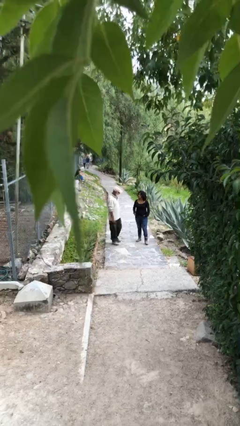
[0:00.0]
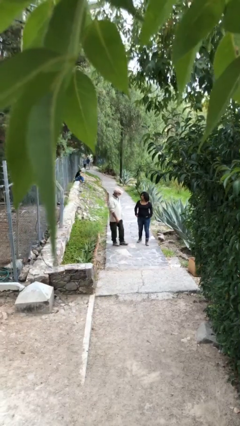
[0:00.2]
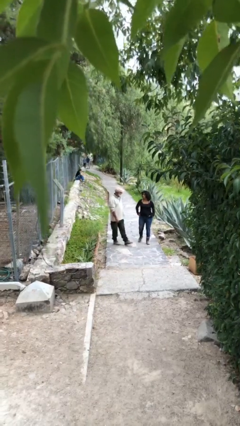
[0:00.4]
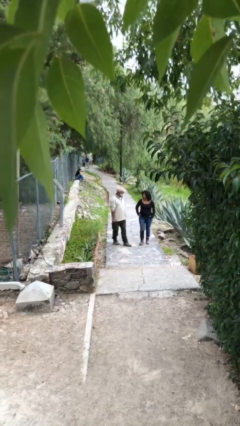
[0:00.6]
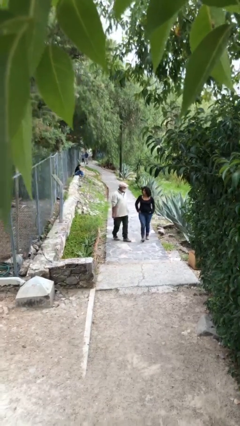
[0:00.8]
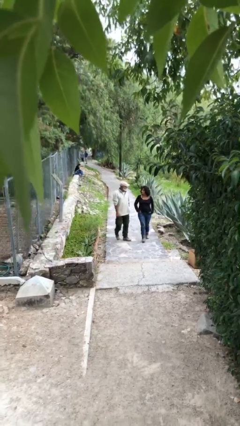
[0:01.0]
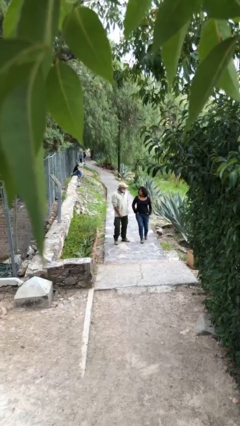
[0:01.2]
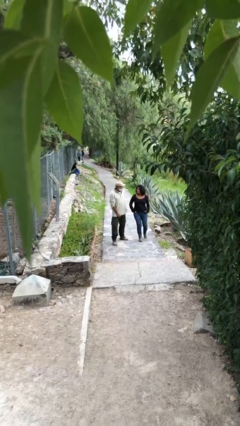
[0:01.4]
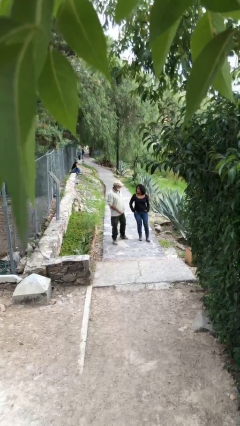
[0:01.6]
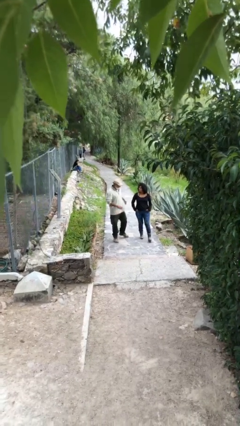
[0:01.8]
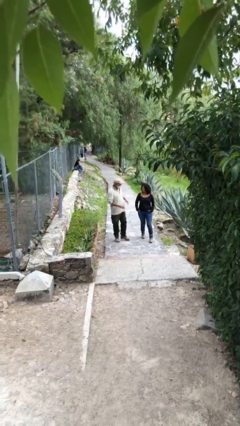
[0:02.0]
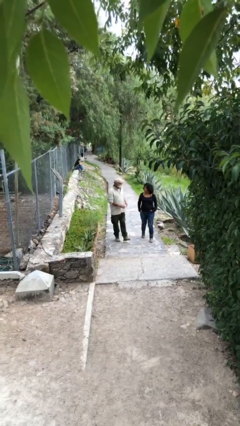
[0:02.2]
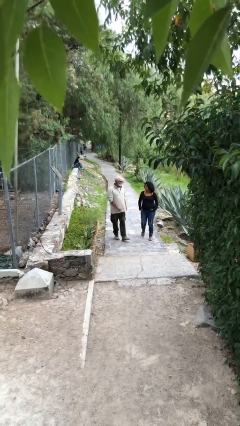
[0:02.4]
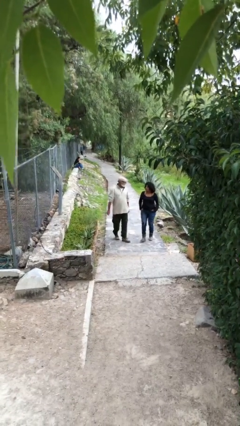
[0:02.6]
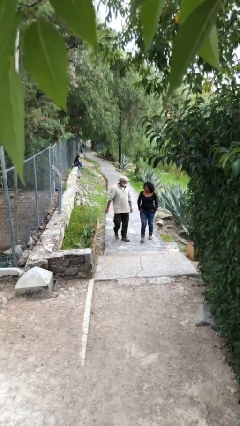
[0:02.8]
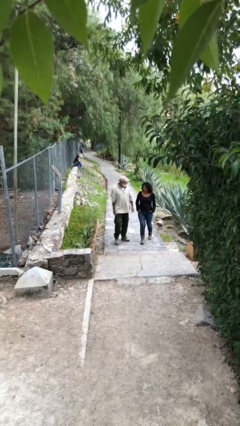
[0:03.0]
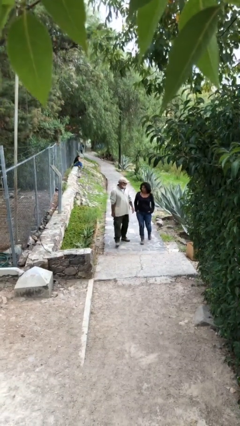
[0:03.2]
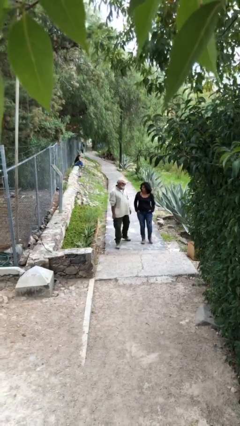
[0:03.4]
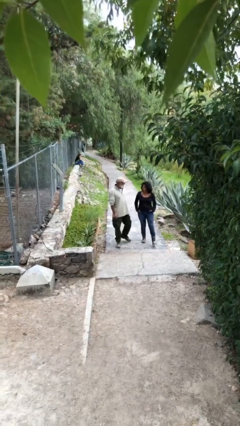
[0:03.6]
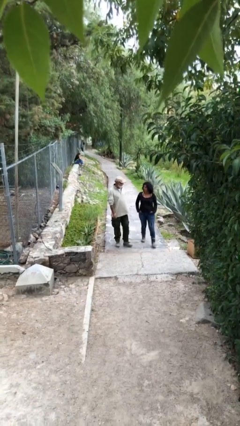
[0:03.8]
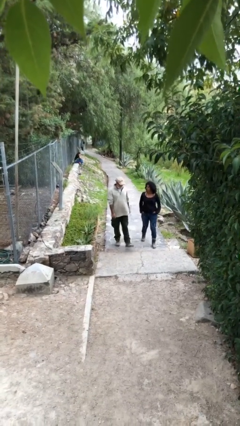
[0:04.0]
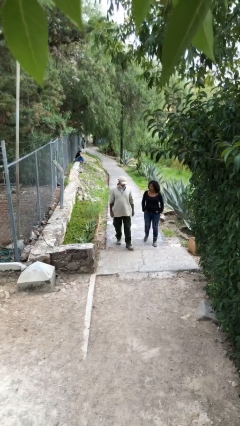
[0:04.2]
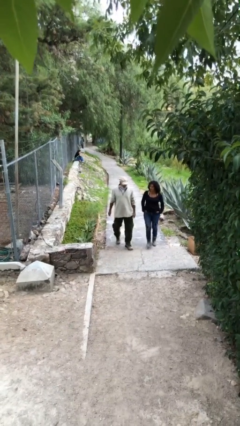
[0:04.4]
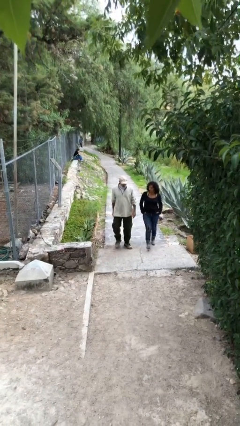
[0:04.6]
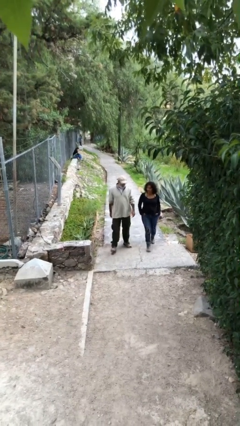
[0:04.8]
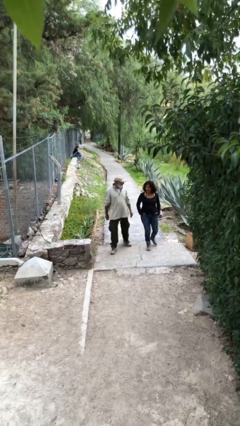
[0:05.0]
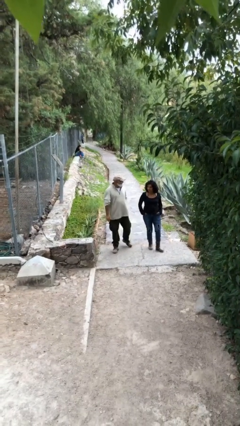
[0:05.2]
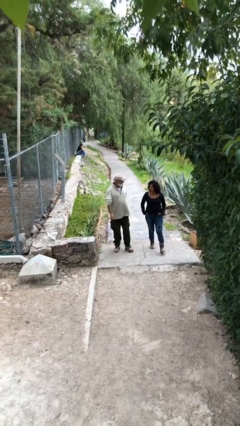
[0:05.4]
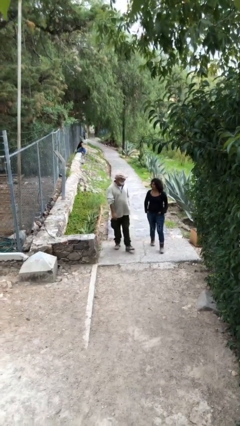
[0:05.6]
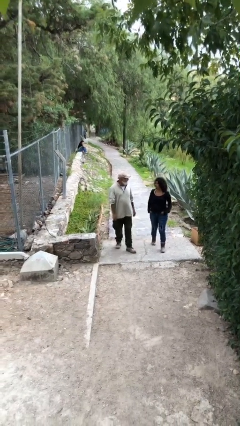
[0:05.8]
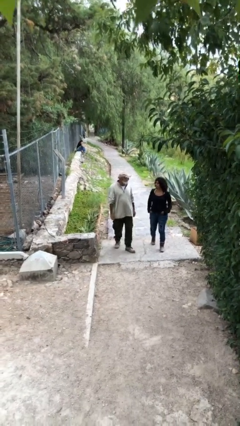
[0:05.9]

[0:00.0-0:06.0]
person talks to person

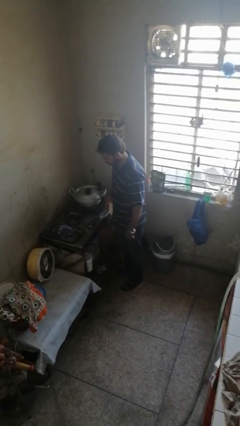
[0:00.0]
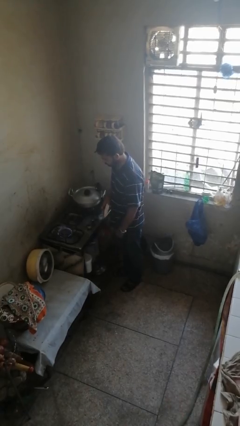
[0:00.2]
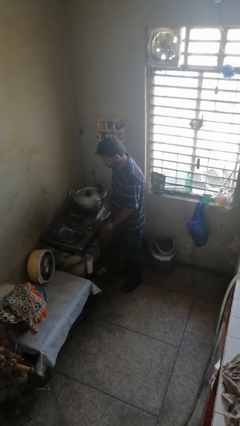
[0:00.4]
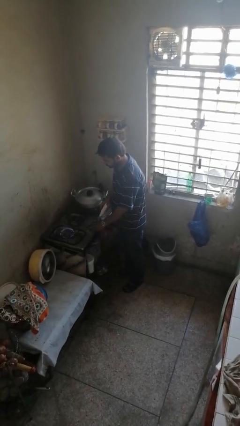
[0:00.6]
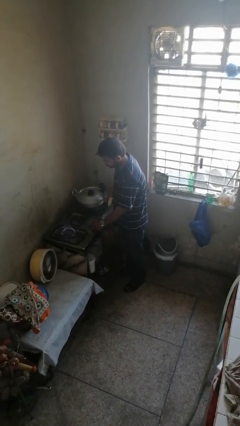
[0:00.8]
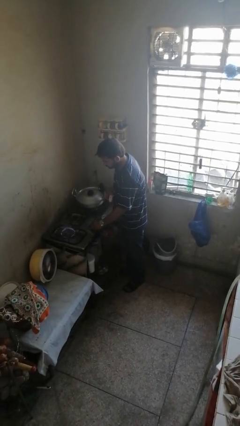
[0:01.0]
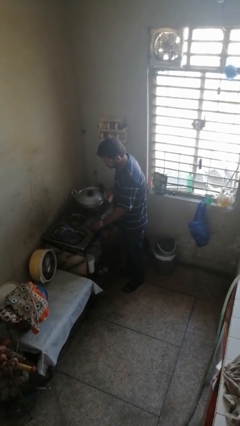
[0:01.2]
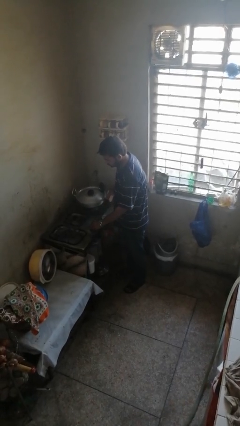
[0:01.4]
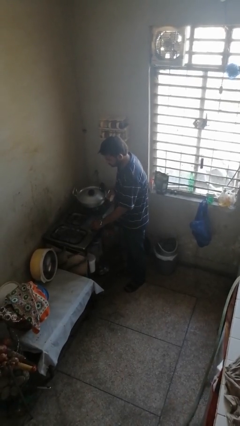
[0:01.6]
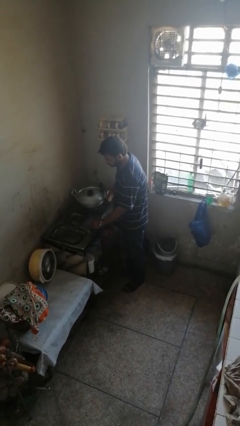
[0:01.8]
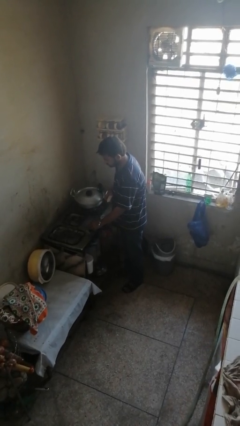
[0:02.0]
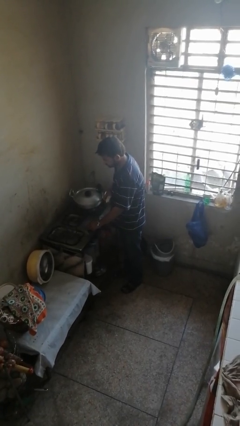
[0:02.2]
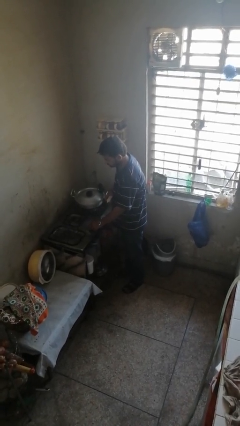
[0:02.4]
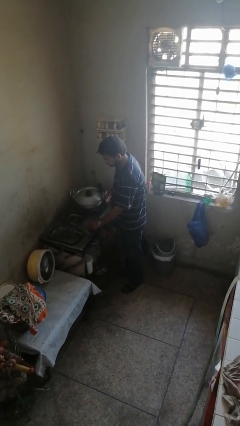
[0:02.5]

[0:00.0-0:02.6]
person turns off stovetop

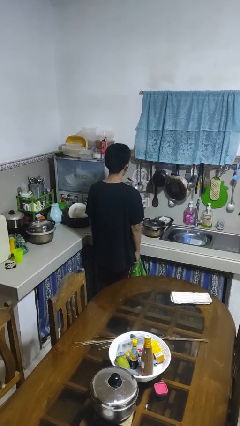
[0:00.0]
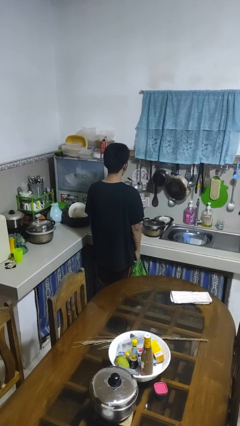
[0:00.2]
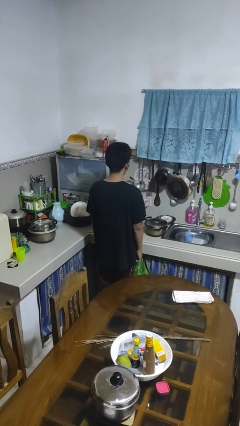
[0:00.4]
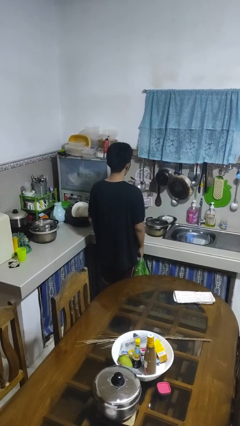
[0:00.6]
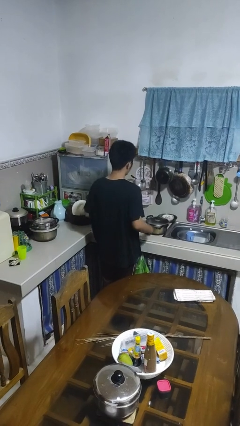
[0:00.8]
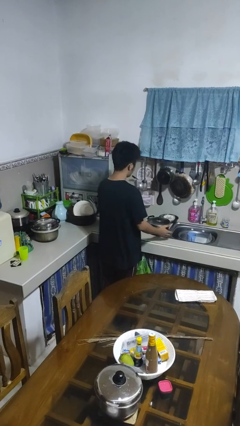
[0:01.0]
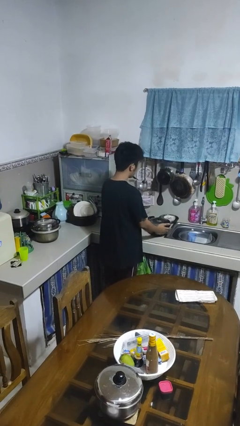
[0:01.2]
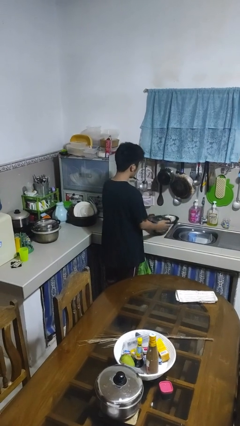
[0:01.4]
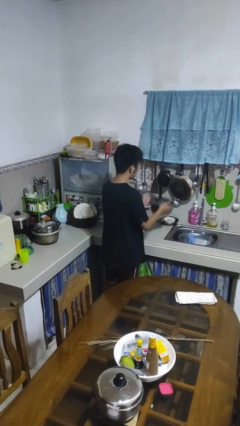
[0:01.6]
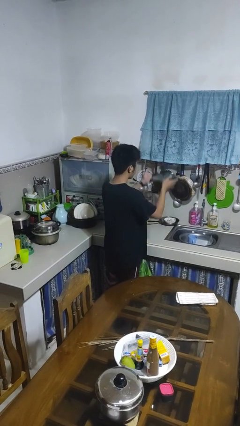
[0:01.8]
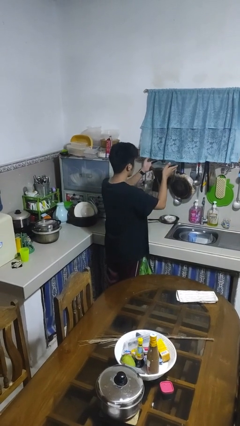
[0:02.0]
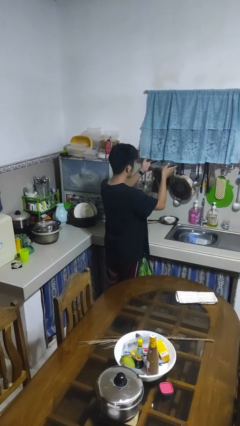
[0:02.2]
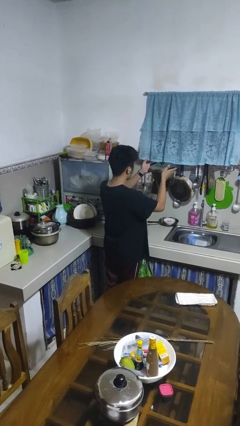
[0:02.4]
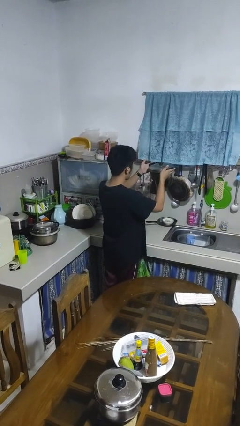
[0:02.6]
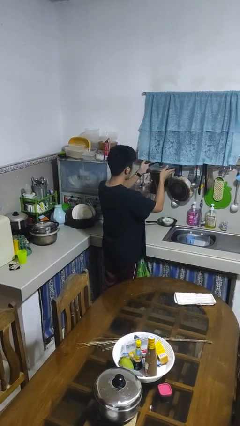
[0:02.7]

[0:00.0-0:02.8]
person picks up object from countertop

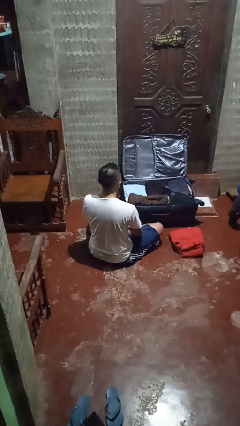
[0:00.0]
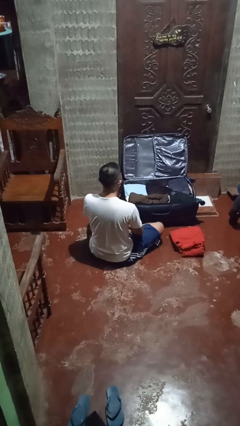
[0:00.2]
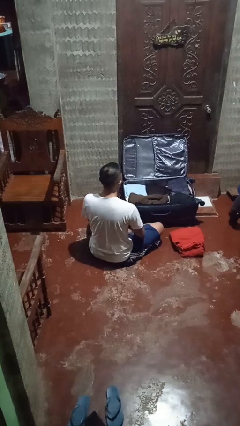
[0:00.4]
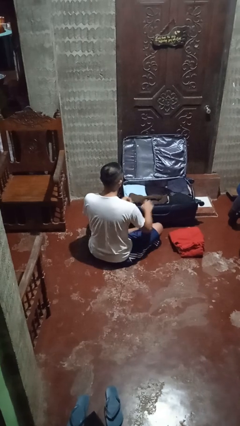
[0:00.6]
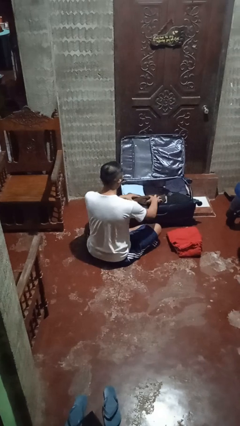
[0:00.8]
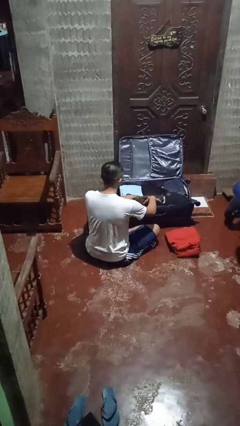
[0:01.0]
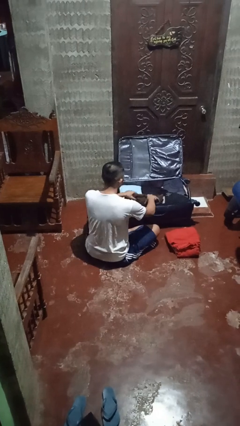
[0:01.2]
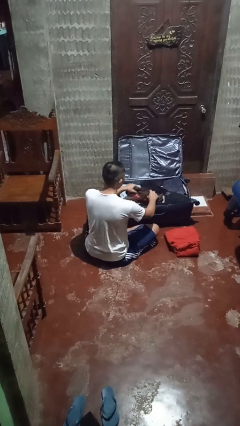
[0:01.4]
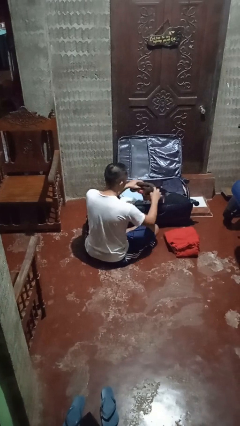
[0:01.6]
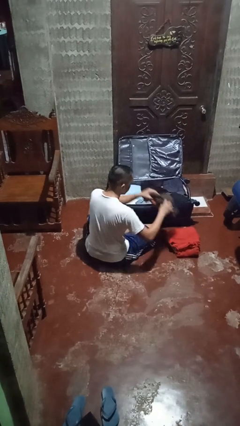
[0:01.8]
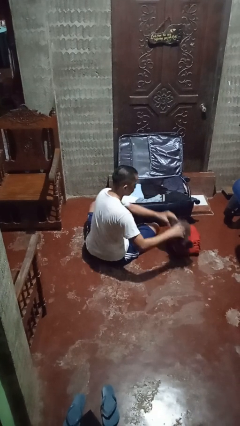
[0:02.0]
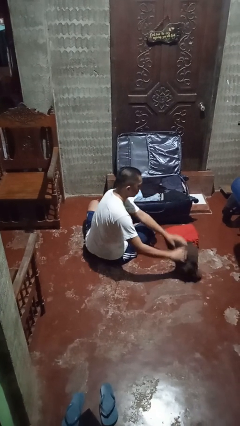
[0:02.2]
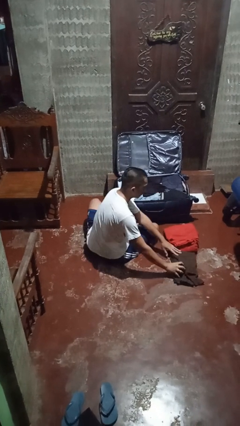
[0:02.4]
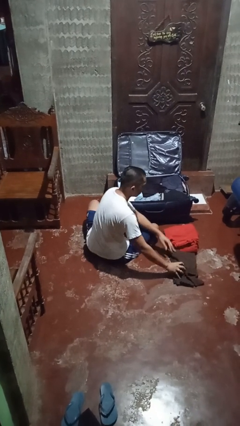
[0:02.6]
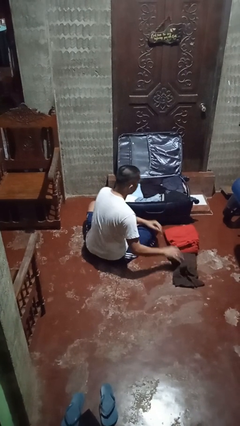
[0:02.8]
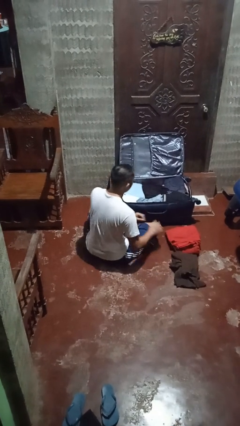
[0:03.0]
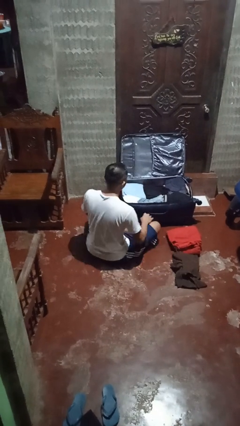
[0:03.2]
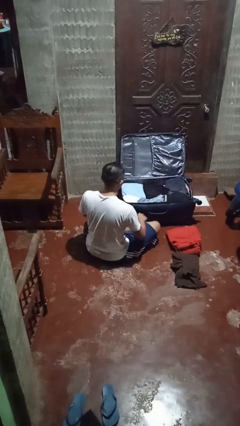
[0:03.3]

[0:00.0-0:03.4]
person unloads clothes from suitcase

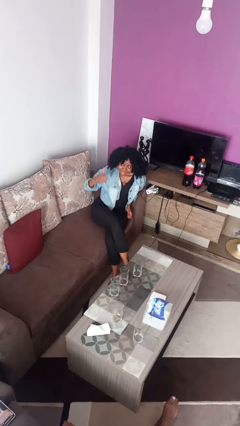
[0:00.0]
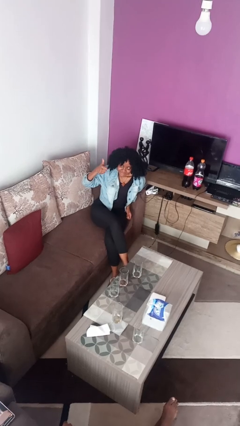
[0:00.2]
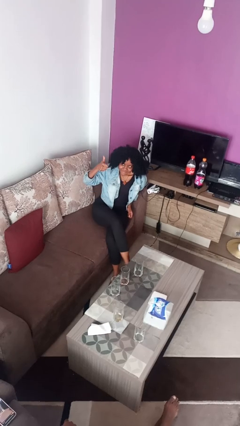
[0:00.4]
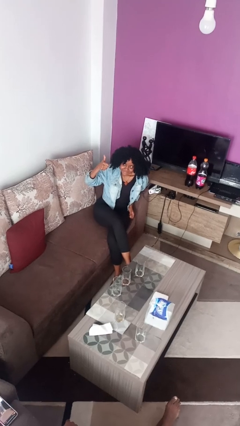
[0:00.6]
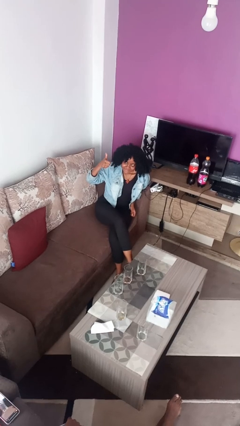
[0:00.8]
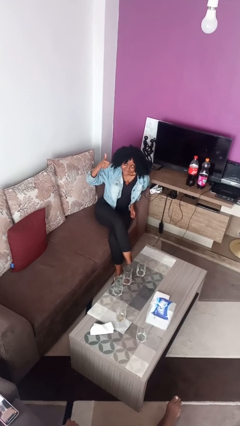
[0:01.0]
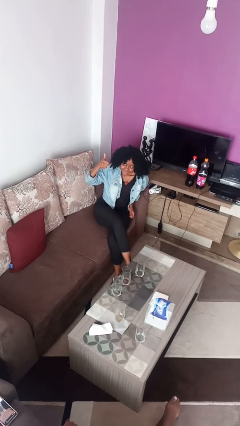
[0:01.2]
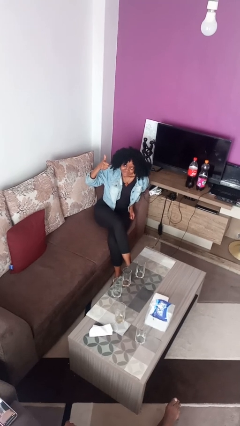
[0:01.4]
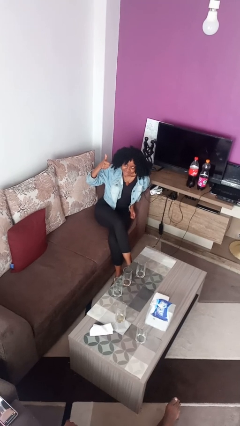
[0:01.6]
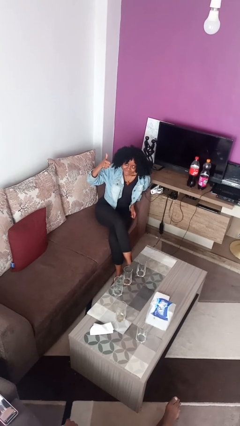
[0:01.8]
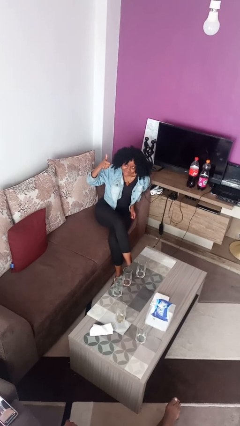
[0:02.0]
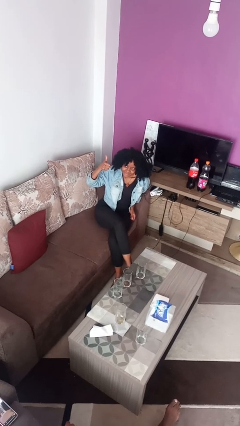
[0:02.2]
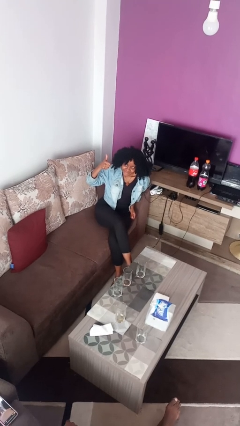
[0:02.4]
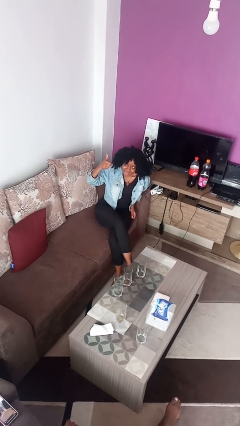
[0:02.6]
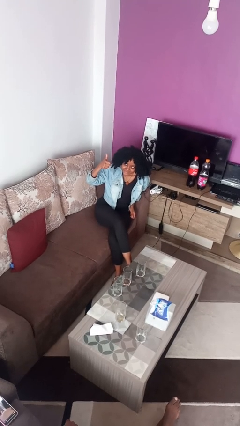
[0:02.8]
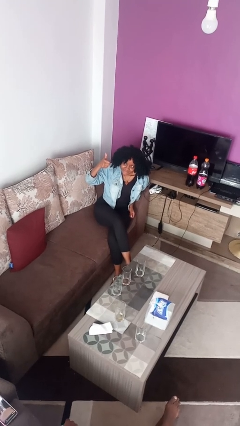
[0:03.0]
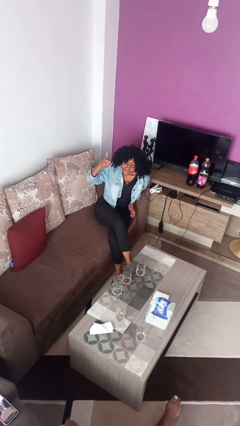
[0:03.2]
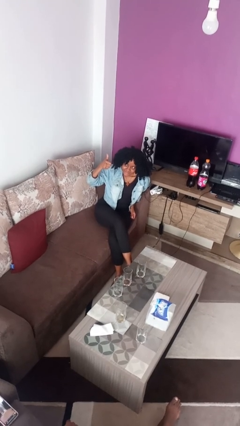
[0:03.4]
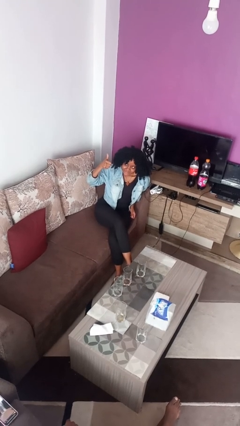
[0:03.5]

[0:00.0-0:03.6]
person gestures thumbs up
